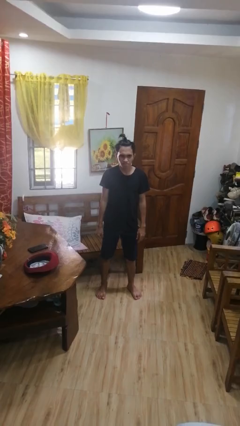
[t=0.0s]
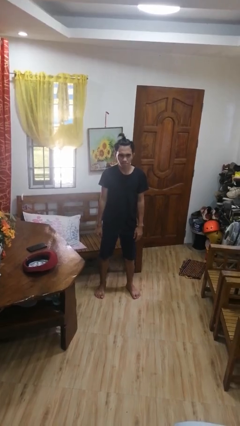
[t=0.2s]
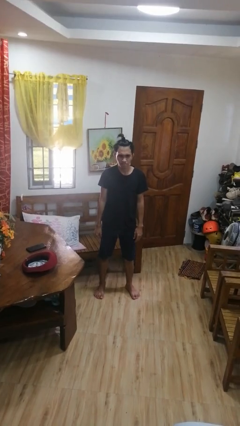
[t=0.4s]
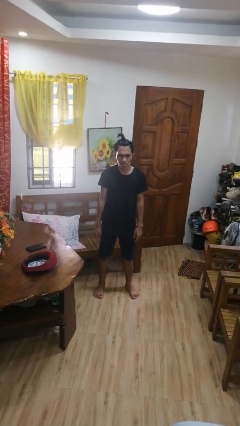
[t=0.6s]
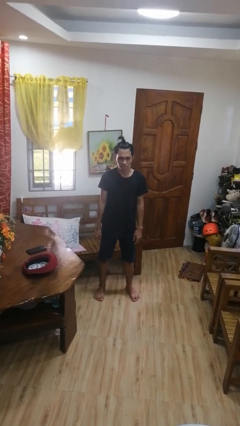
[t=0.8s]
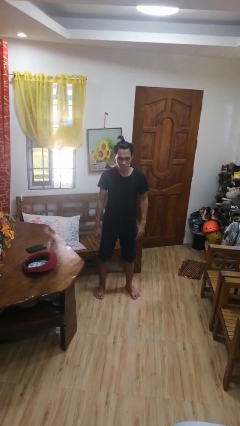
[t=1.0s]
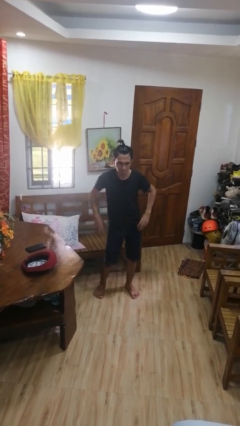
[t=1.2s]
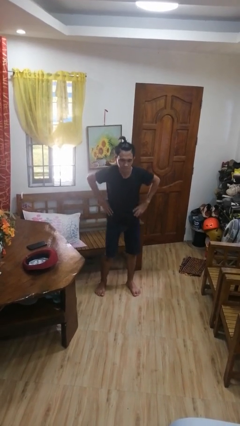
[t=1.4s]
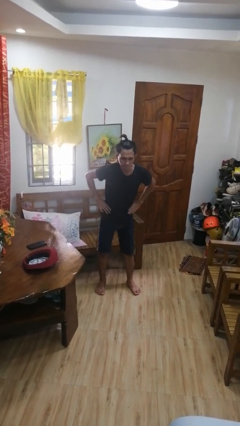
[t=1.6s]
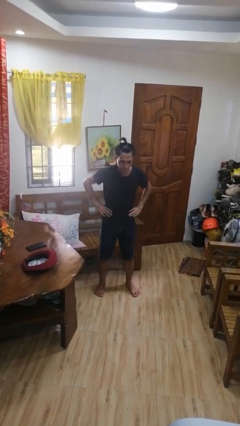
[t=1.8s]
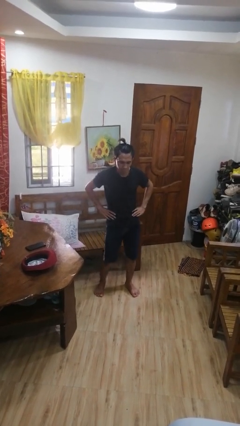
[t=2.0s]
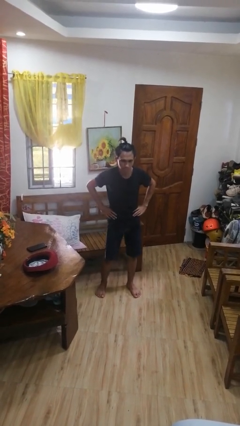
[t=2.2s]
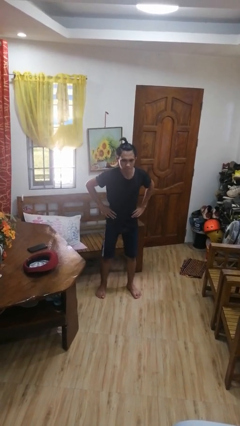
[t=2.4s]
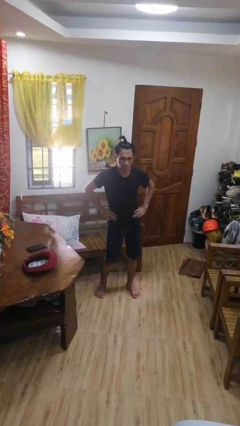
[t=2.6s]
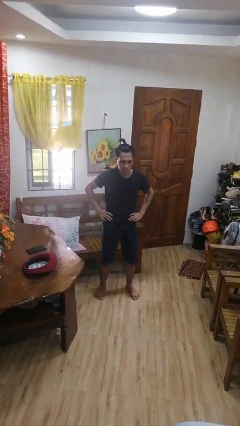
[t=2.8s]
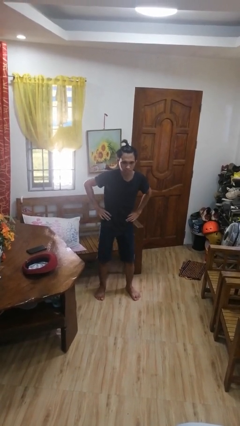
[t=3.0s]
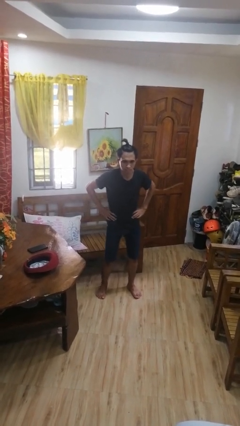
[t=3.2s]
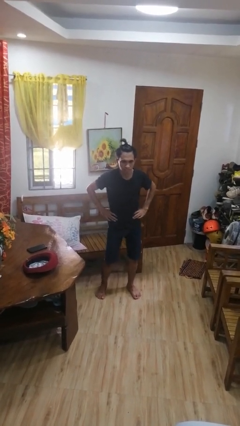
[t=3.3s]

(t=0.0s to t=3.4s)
person wiggles hips

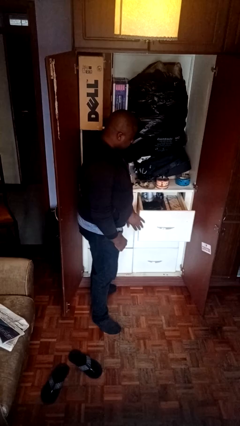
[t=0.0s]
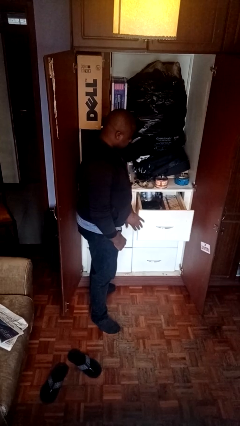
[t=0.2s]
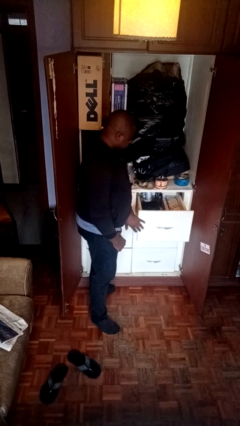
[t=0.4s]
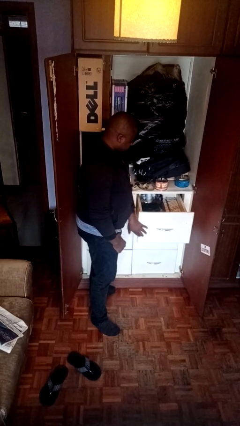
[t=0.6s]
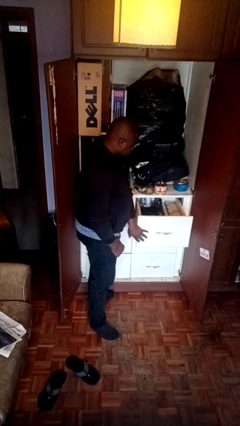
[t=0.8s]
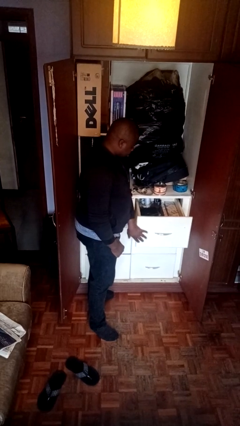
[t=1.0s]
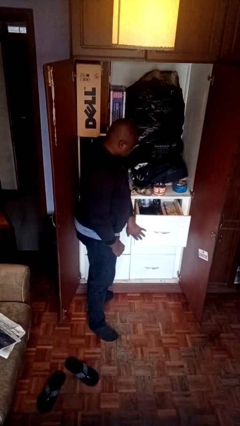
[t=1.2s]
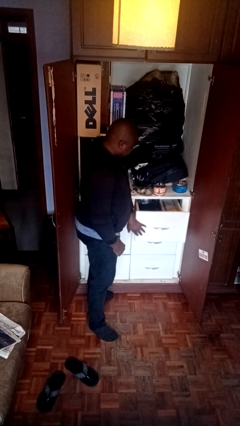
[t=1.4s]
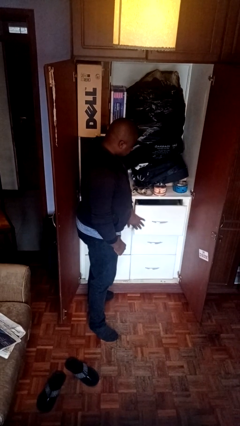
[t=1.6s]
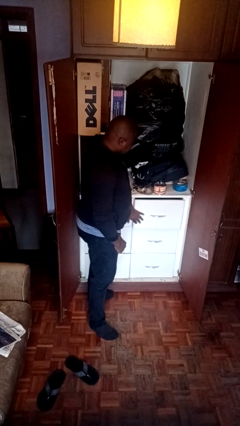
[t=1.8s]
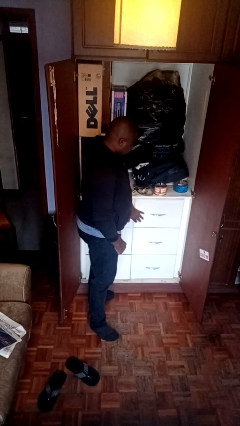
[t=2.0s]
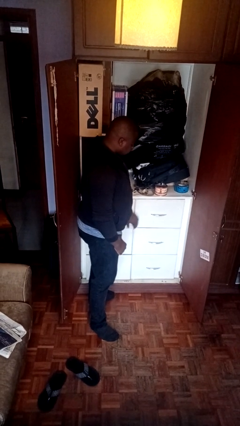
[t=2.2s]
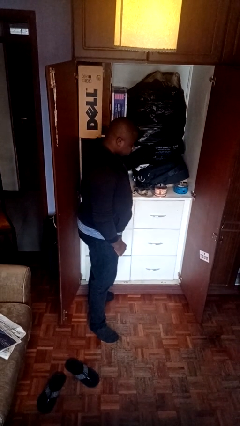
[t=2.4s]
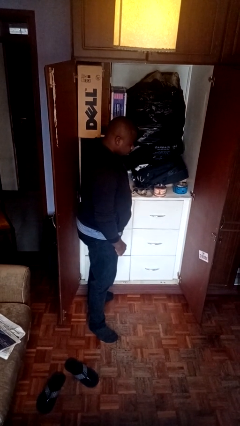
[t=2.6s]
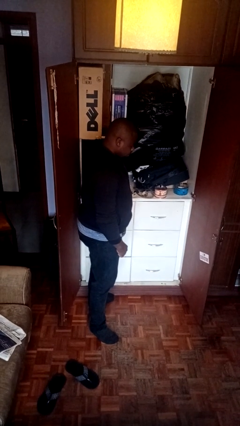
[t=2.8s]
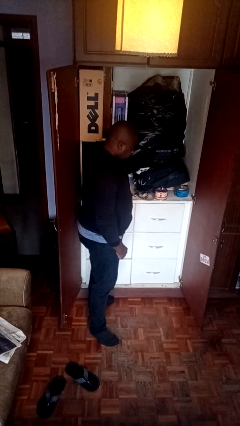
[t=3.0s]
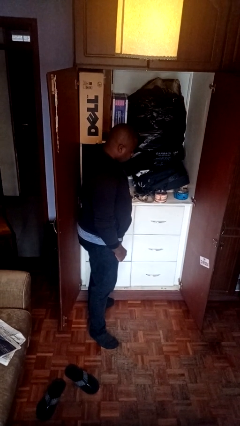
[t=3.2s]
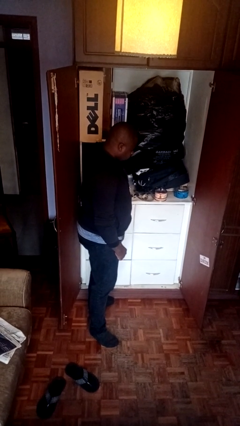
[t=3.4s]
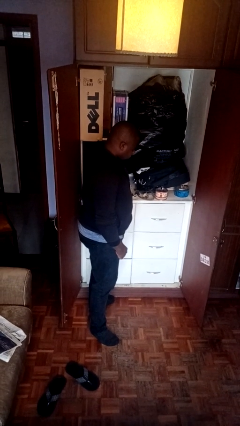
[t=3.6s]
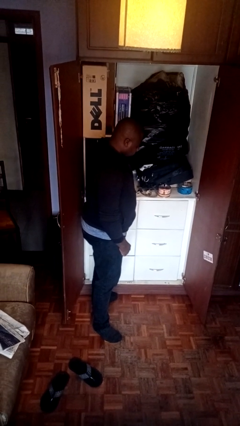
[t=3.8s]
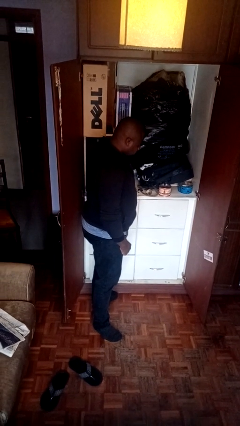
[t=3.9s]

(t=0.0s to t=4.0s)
person closes dresser drawer

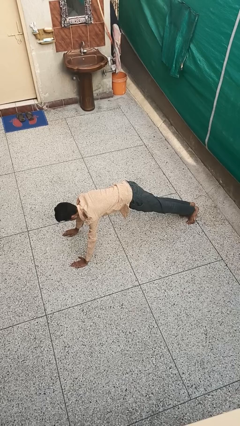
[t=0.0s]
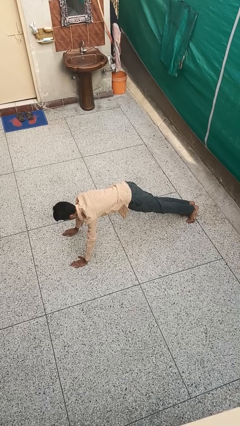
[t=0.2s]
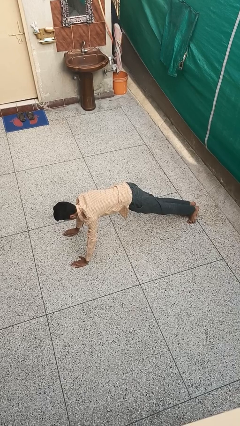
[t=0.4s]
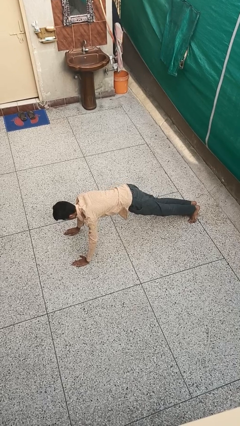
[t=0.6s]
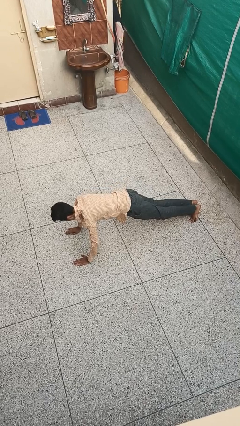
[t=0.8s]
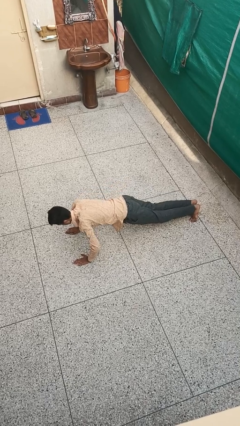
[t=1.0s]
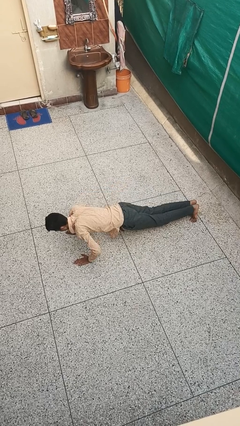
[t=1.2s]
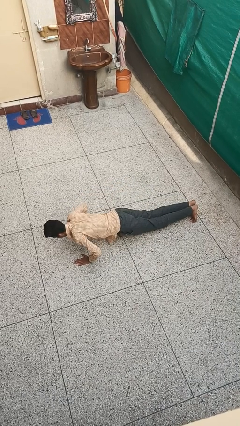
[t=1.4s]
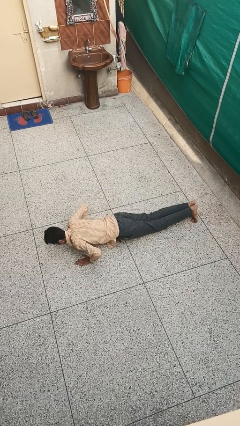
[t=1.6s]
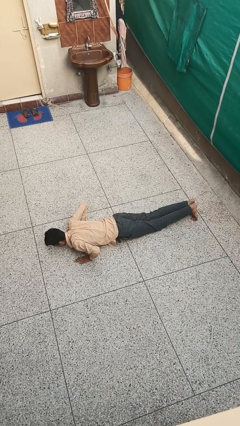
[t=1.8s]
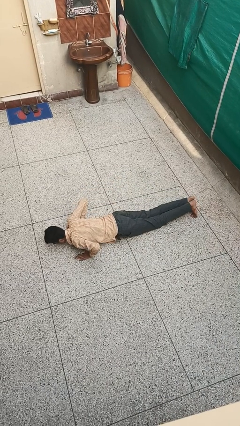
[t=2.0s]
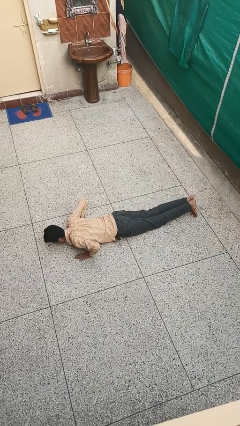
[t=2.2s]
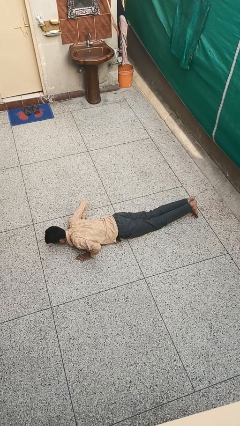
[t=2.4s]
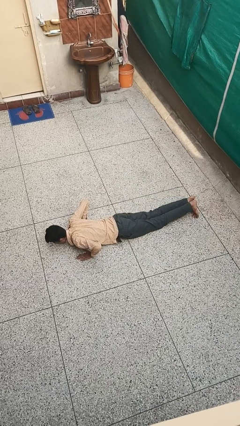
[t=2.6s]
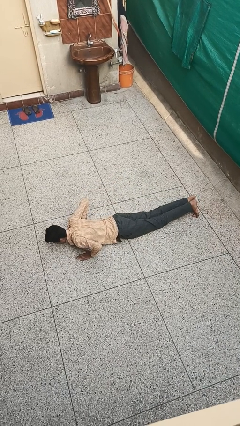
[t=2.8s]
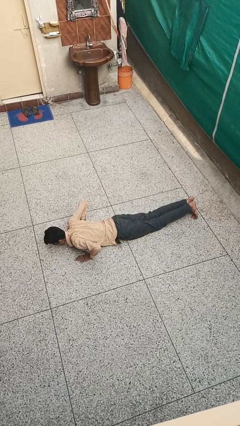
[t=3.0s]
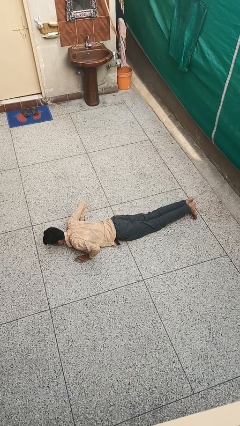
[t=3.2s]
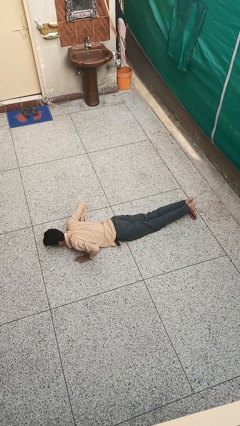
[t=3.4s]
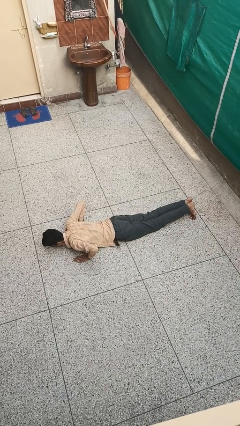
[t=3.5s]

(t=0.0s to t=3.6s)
person exercises with pushup

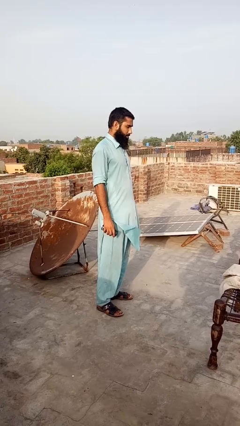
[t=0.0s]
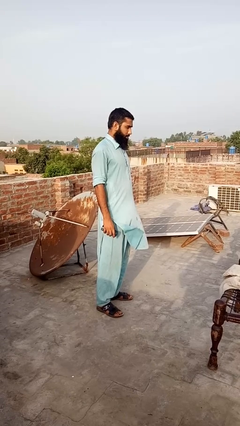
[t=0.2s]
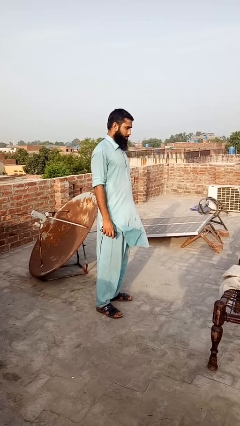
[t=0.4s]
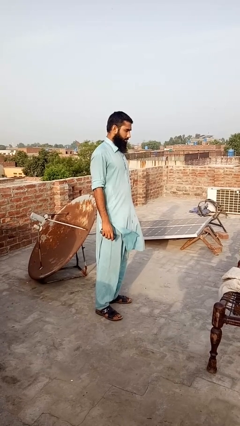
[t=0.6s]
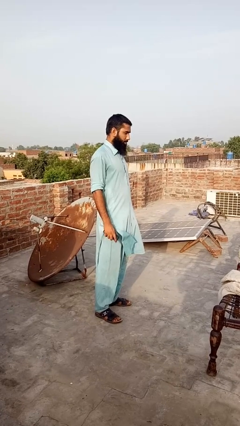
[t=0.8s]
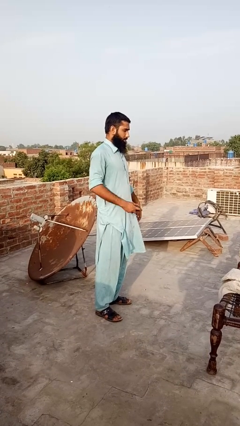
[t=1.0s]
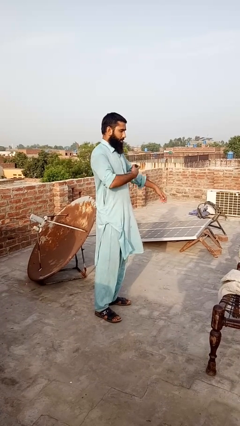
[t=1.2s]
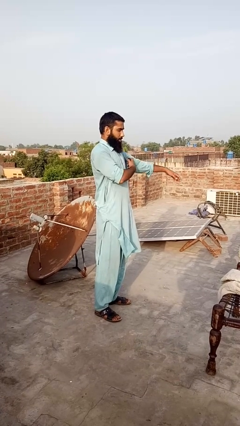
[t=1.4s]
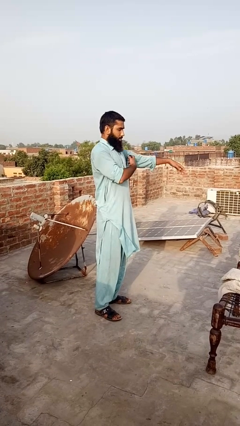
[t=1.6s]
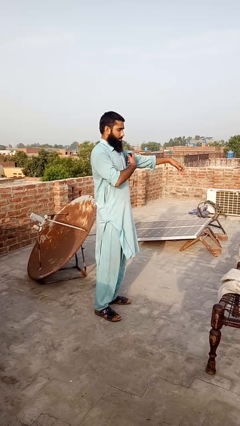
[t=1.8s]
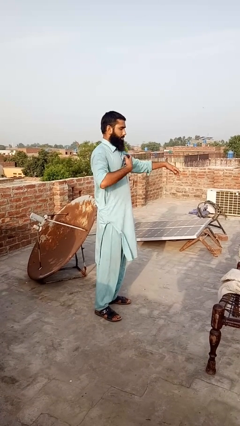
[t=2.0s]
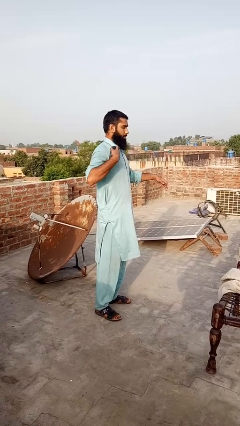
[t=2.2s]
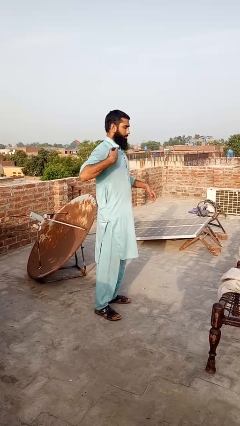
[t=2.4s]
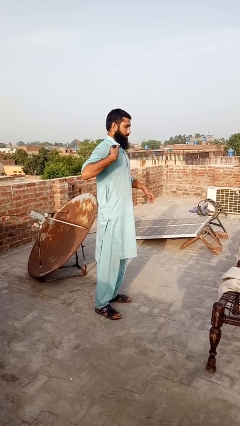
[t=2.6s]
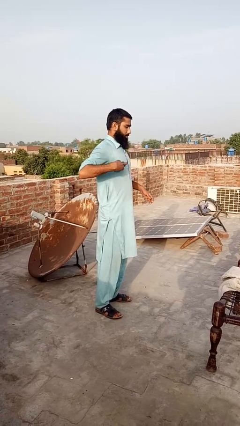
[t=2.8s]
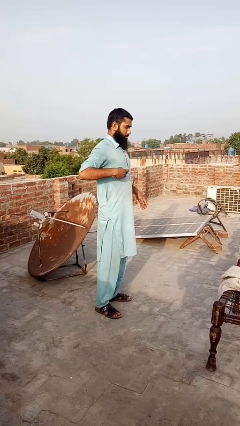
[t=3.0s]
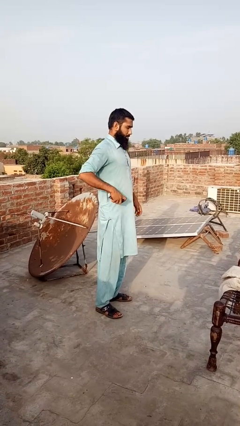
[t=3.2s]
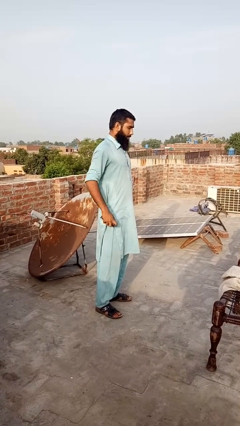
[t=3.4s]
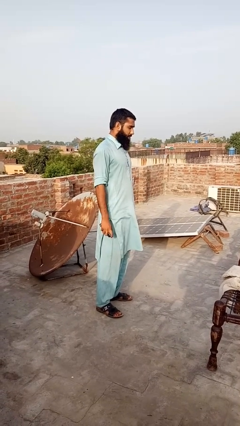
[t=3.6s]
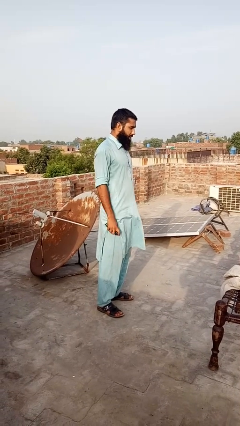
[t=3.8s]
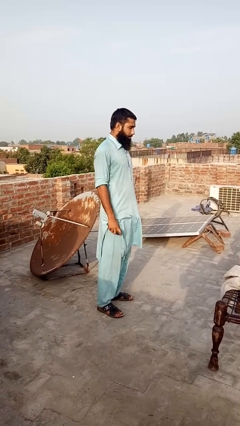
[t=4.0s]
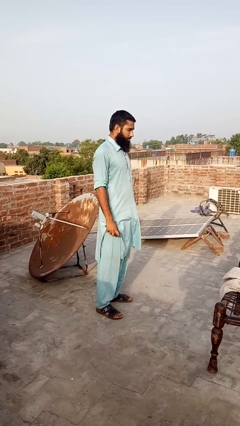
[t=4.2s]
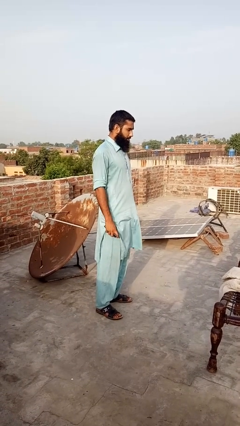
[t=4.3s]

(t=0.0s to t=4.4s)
person applies deodorant

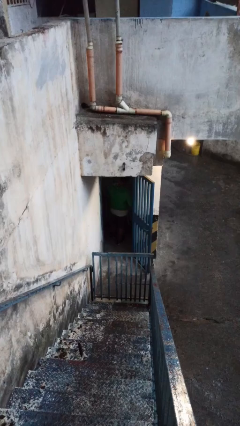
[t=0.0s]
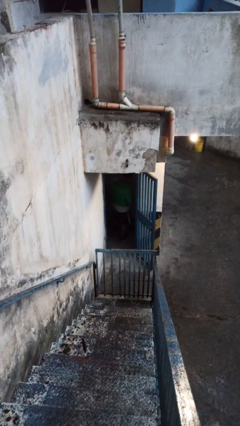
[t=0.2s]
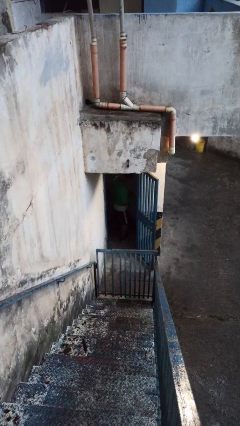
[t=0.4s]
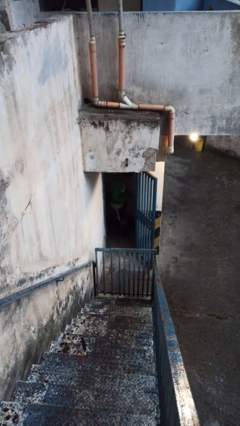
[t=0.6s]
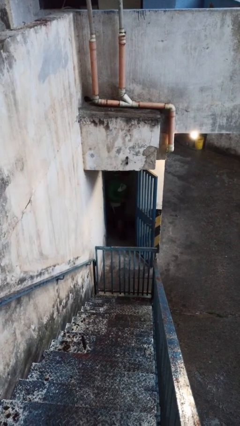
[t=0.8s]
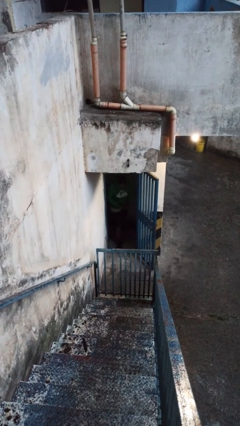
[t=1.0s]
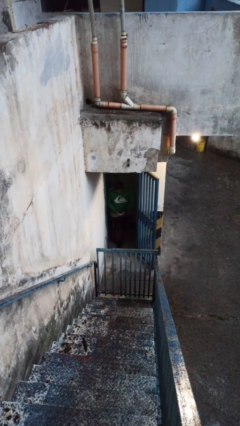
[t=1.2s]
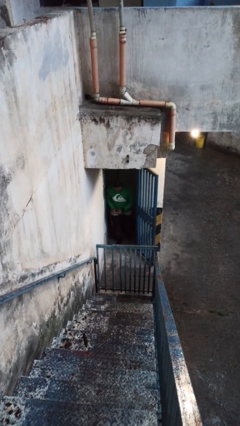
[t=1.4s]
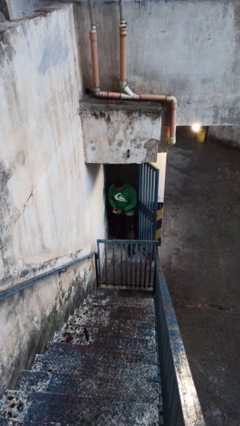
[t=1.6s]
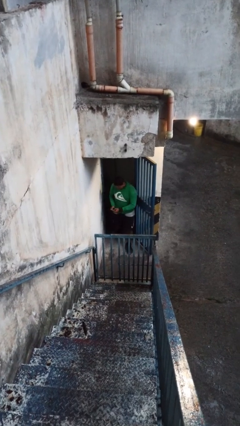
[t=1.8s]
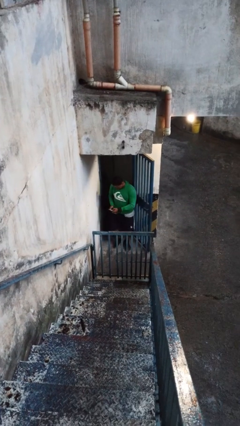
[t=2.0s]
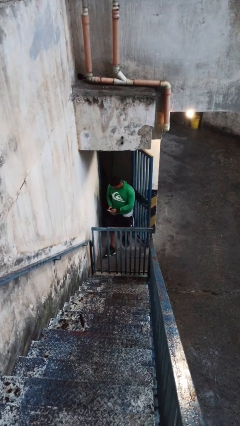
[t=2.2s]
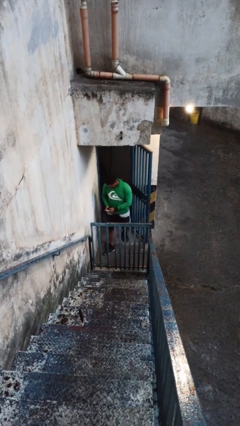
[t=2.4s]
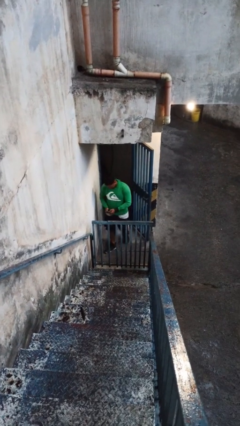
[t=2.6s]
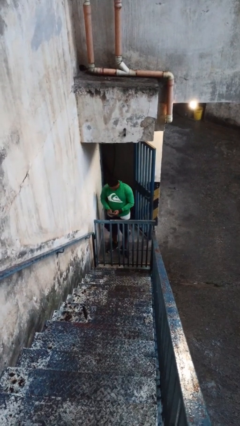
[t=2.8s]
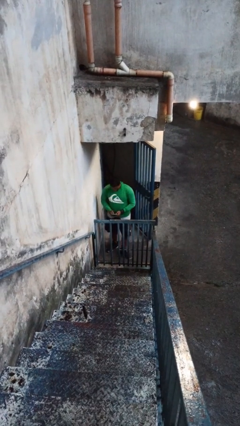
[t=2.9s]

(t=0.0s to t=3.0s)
person enters scene through structure
